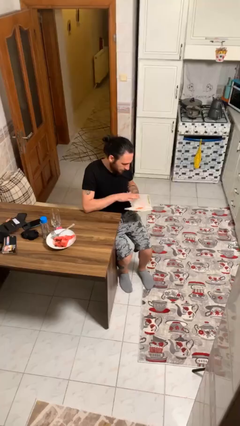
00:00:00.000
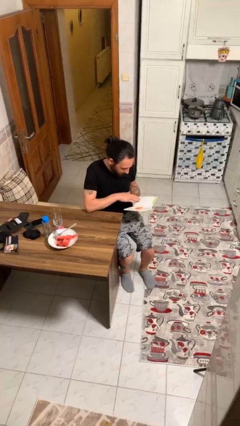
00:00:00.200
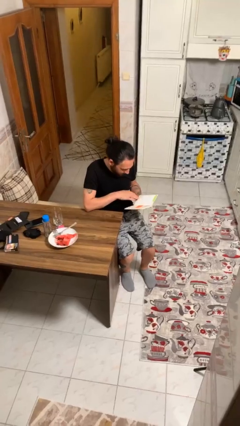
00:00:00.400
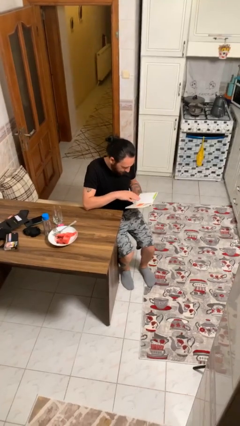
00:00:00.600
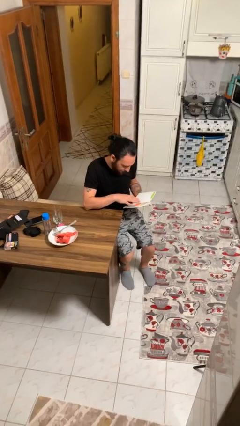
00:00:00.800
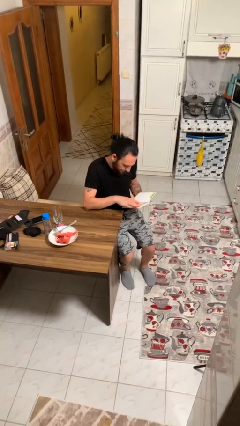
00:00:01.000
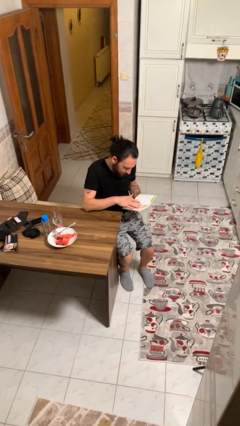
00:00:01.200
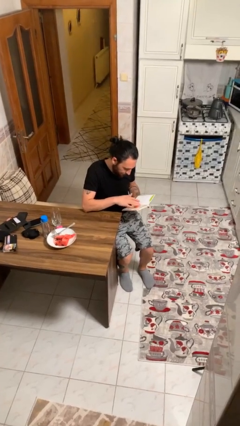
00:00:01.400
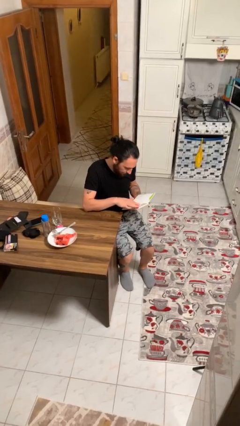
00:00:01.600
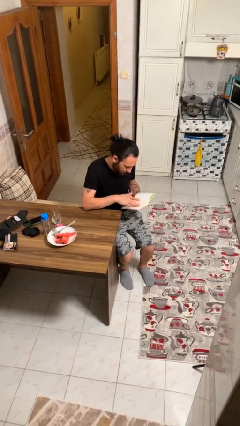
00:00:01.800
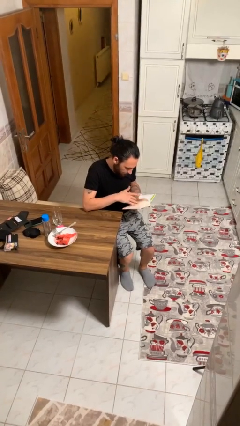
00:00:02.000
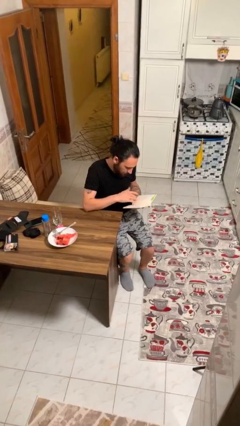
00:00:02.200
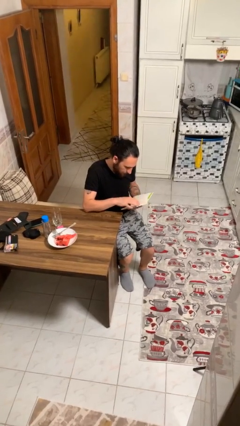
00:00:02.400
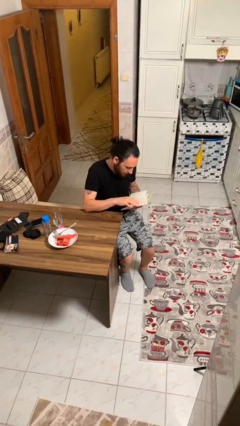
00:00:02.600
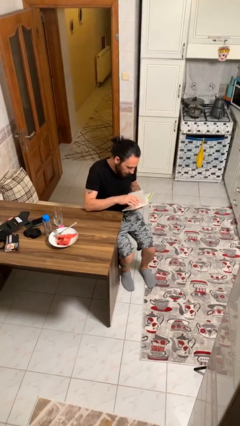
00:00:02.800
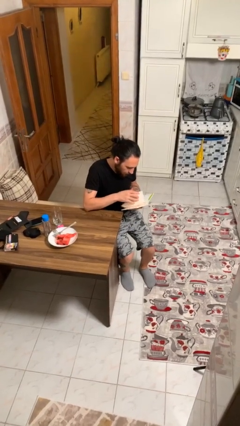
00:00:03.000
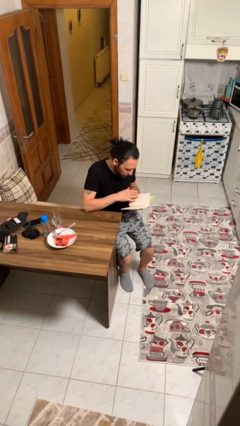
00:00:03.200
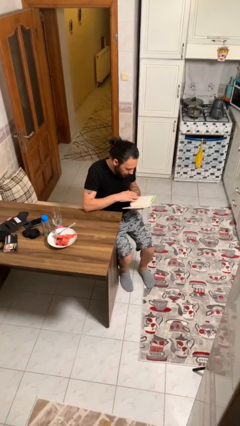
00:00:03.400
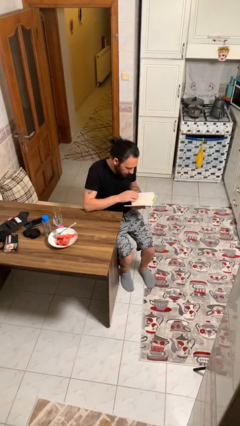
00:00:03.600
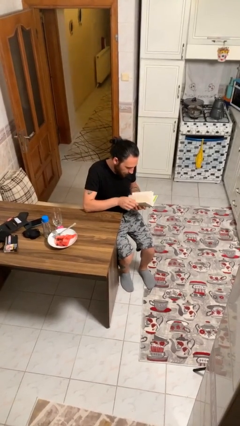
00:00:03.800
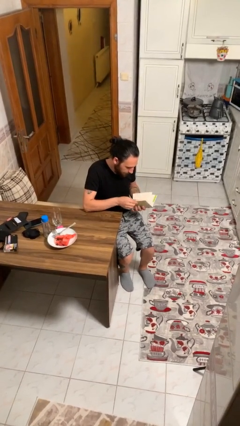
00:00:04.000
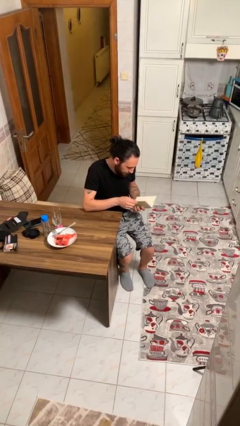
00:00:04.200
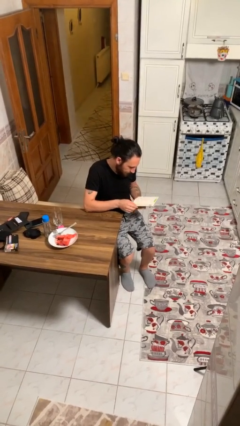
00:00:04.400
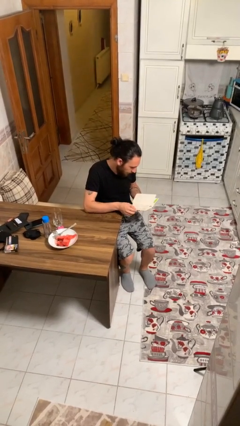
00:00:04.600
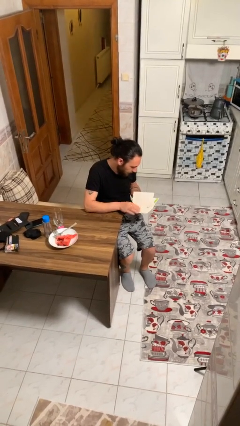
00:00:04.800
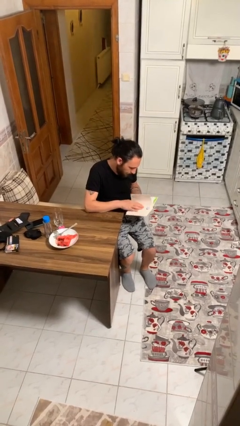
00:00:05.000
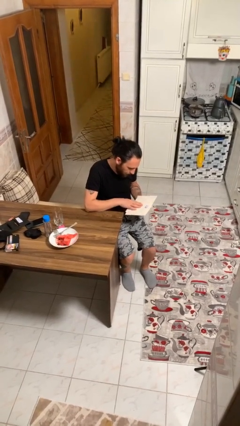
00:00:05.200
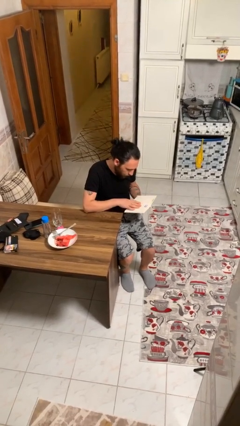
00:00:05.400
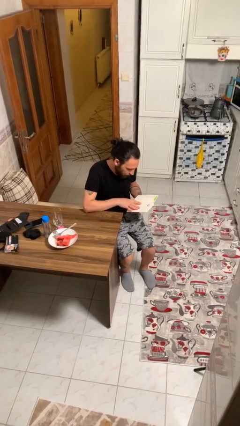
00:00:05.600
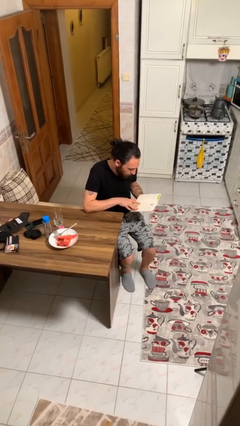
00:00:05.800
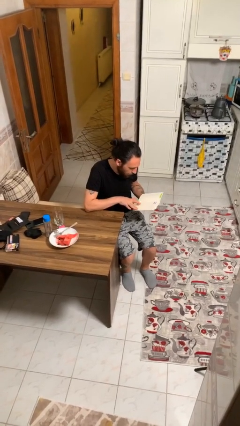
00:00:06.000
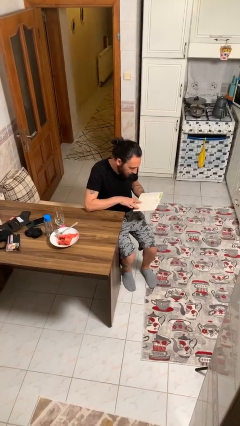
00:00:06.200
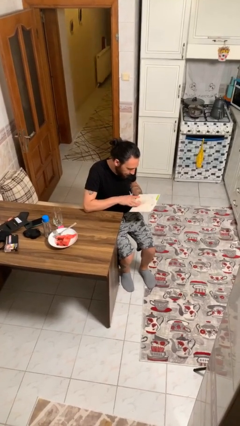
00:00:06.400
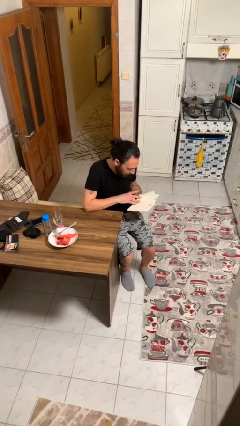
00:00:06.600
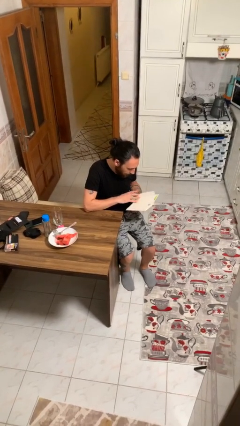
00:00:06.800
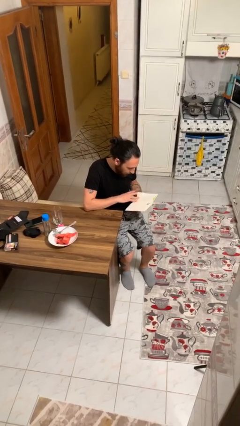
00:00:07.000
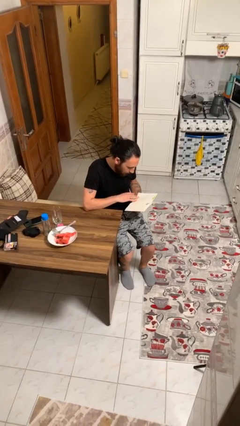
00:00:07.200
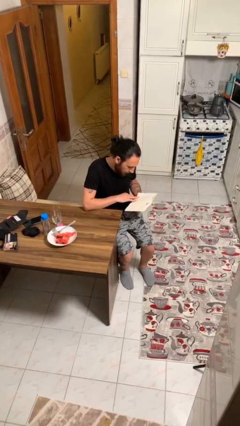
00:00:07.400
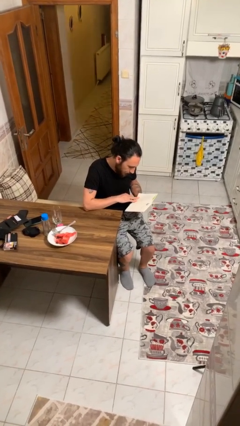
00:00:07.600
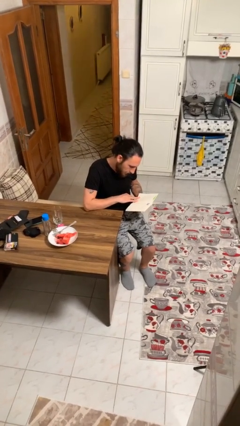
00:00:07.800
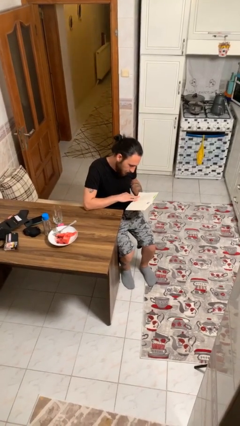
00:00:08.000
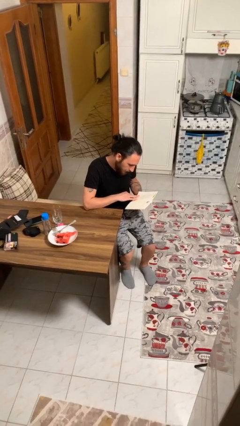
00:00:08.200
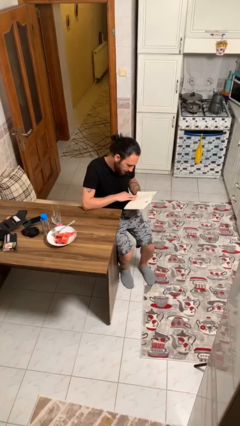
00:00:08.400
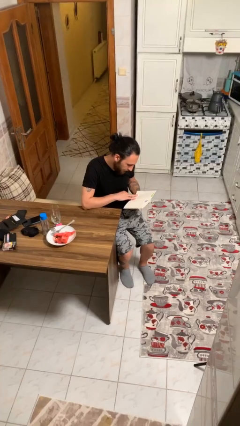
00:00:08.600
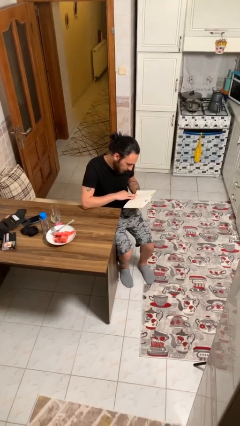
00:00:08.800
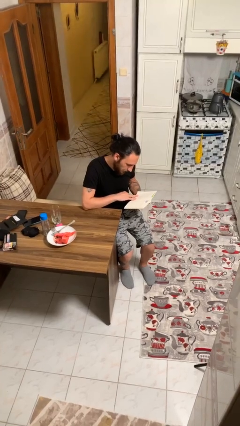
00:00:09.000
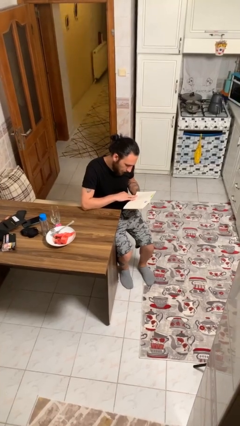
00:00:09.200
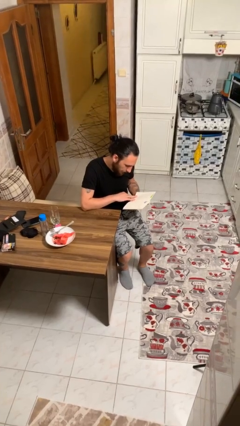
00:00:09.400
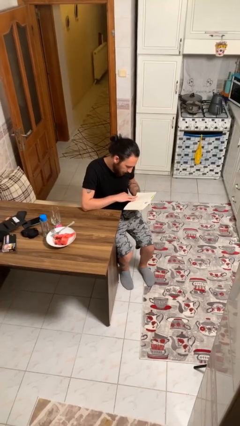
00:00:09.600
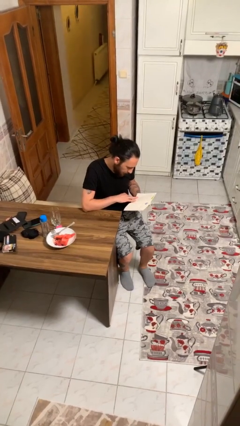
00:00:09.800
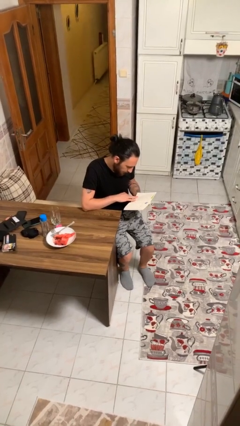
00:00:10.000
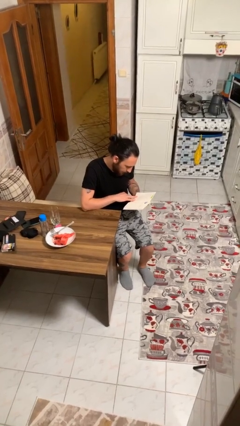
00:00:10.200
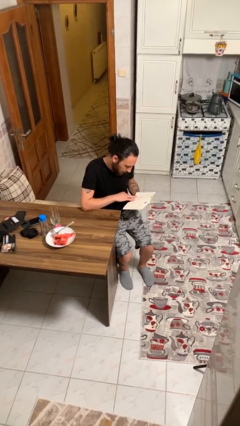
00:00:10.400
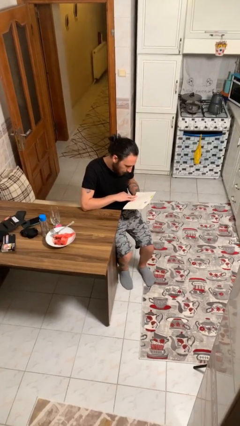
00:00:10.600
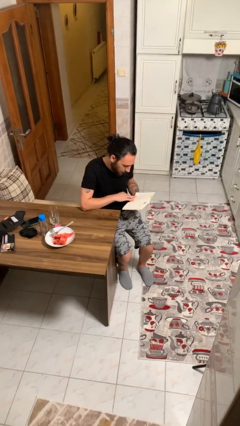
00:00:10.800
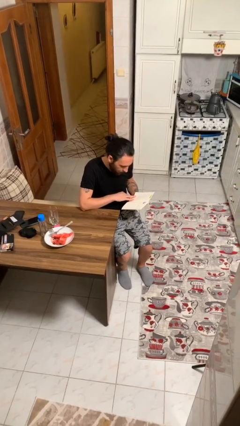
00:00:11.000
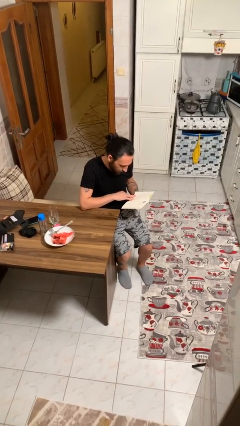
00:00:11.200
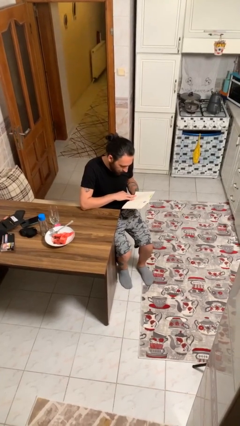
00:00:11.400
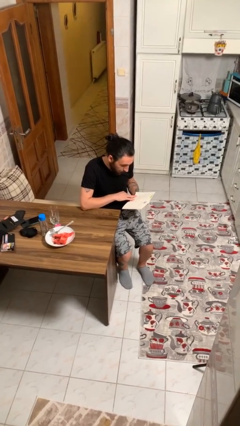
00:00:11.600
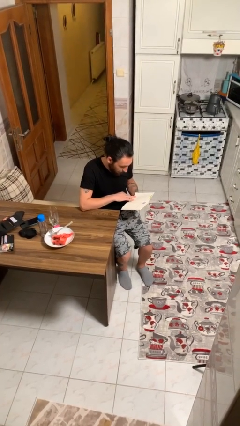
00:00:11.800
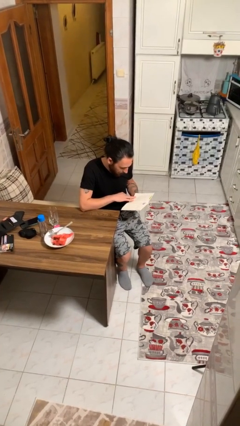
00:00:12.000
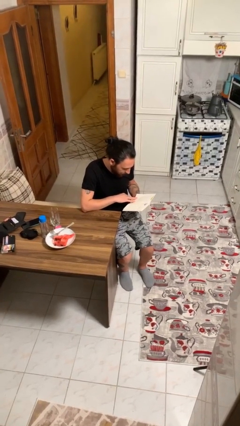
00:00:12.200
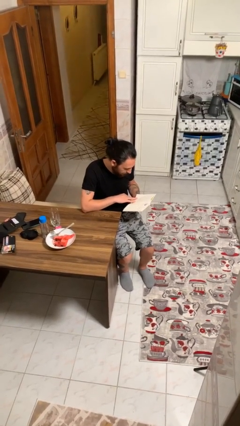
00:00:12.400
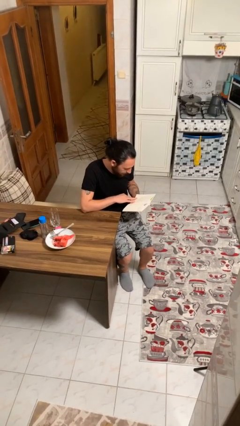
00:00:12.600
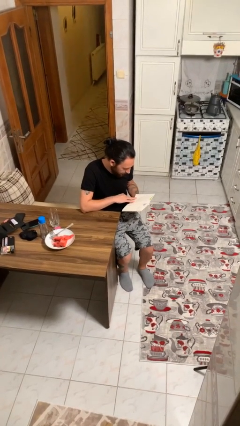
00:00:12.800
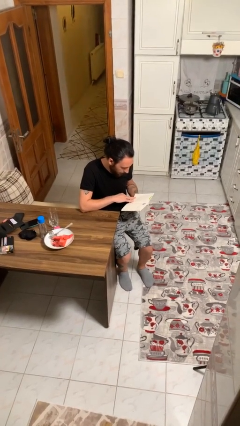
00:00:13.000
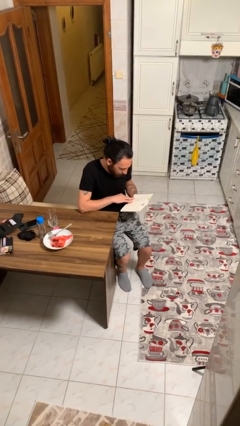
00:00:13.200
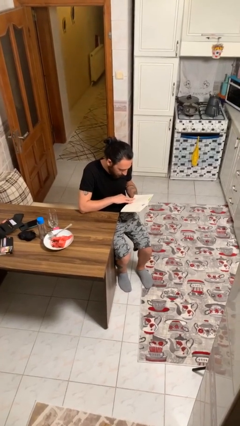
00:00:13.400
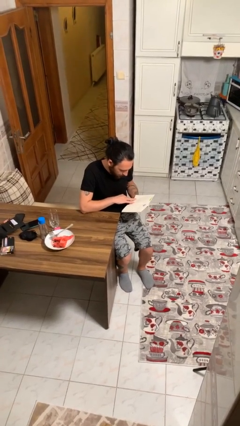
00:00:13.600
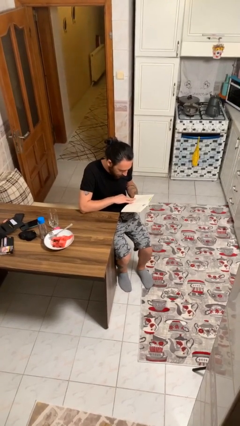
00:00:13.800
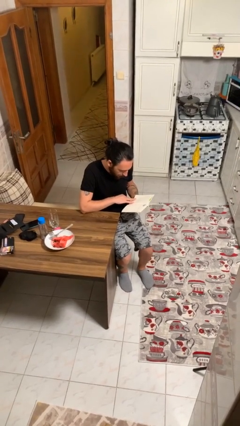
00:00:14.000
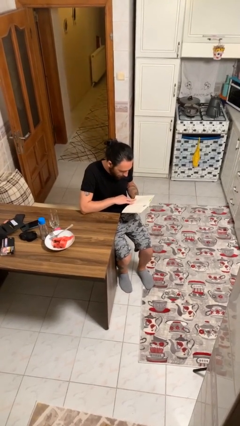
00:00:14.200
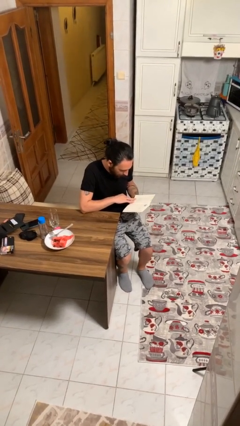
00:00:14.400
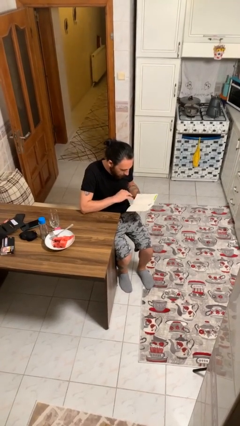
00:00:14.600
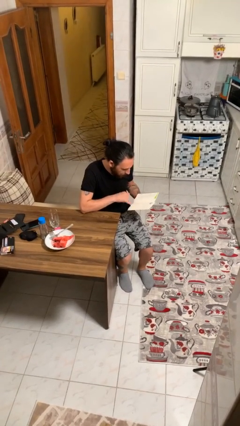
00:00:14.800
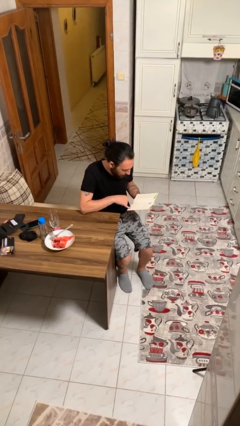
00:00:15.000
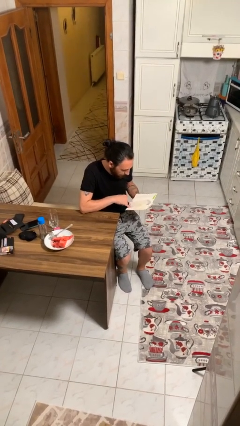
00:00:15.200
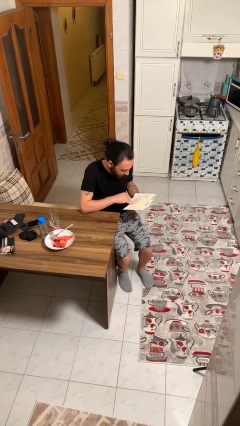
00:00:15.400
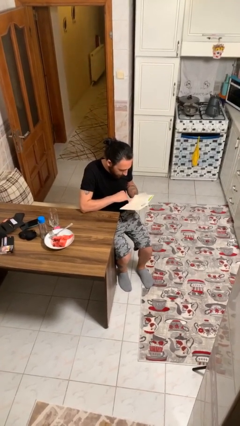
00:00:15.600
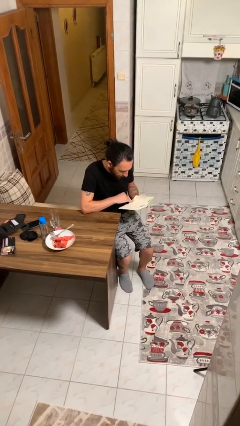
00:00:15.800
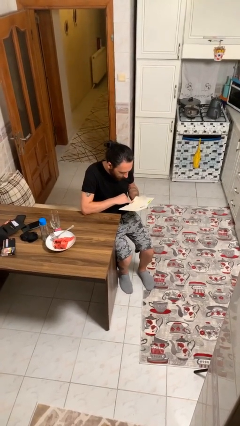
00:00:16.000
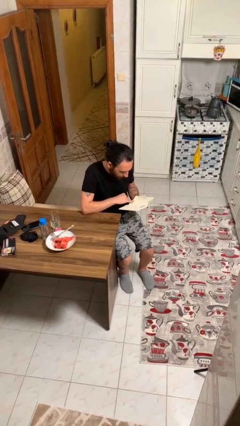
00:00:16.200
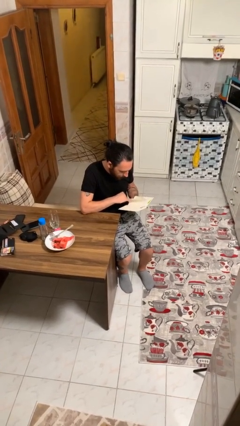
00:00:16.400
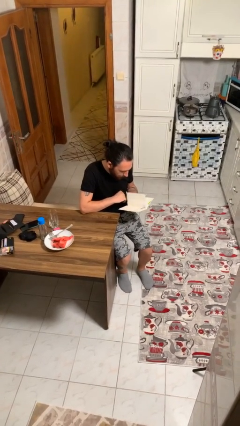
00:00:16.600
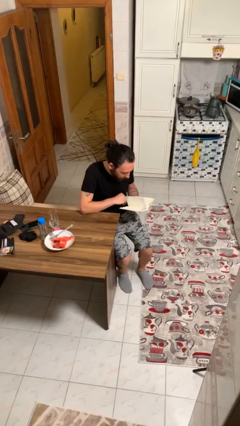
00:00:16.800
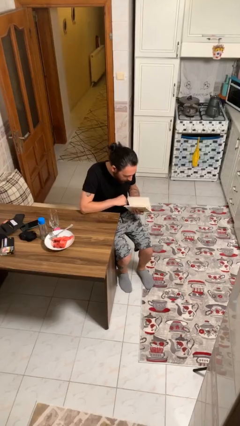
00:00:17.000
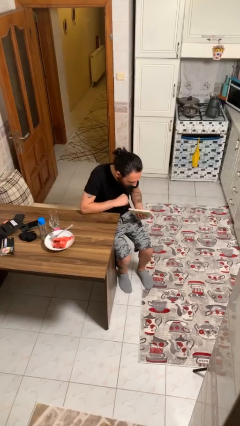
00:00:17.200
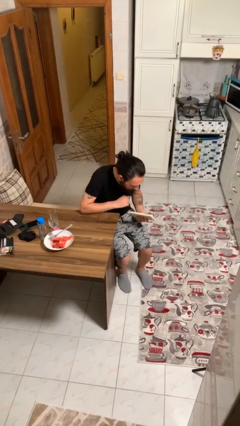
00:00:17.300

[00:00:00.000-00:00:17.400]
person reads document

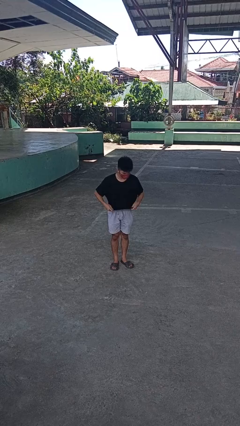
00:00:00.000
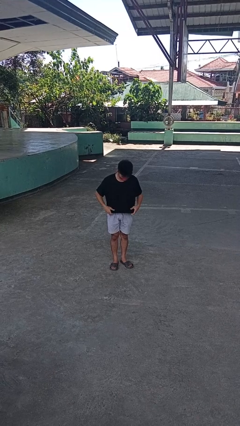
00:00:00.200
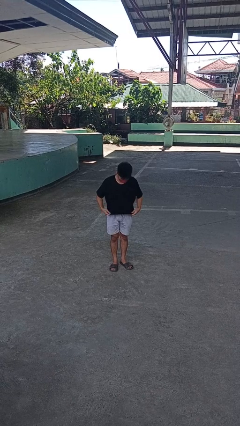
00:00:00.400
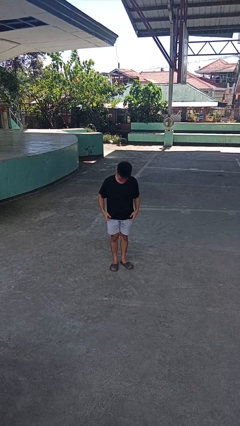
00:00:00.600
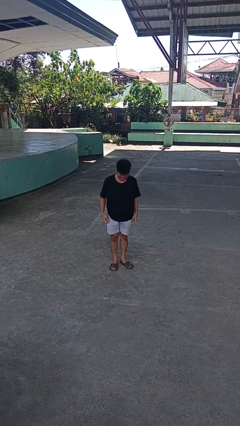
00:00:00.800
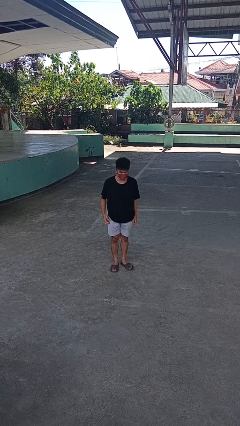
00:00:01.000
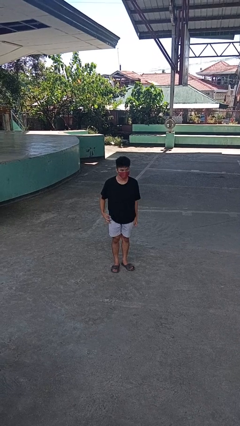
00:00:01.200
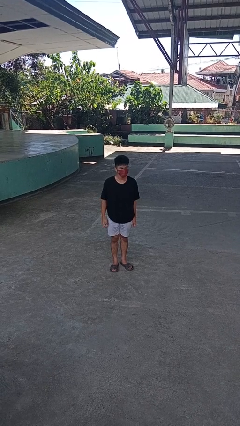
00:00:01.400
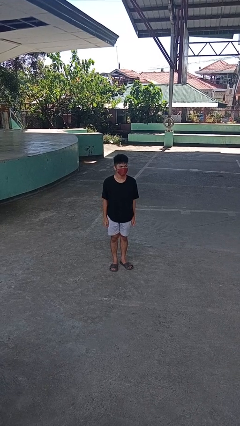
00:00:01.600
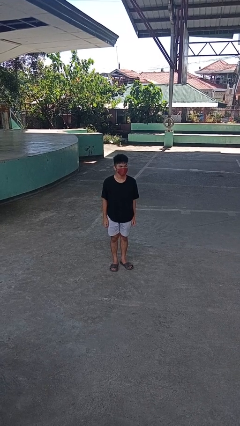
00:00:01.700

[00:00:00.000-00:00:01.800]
person untucks shirt
